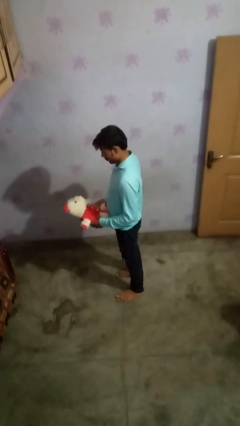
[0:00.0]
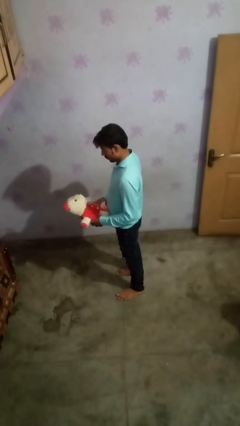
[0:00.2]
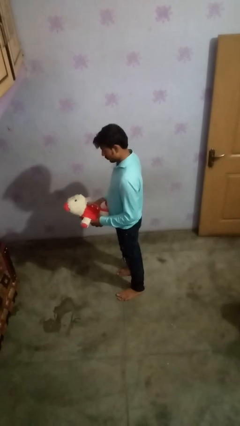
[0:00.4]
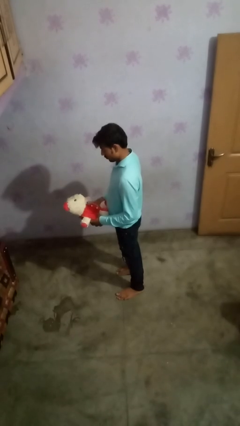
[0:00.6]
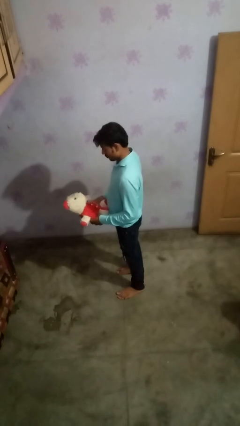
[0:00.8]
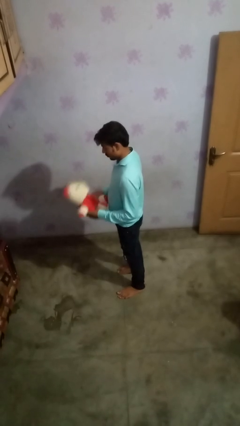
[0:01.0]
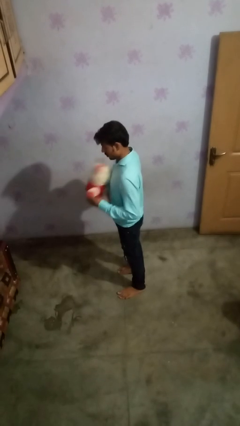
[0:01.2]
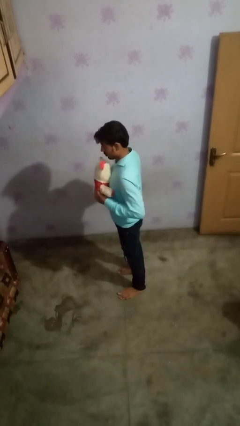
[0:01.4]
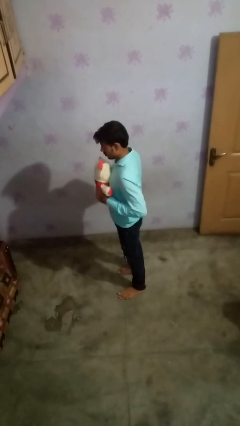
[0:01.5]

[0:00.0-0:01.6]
person hugs stuffed animal

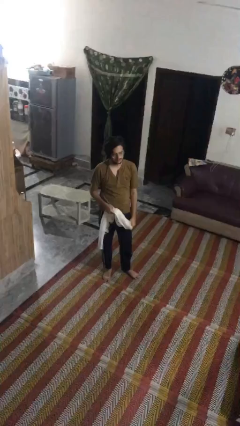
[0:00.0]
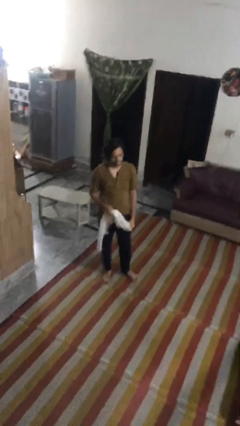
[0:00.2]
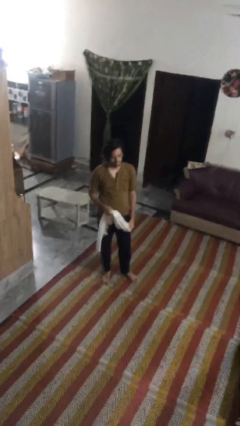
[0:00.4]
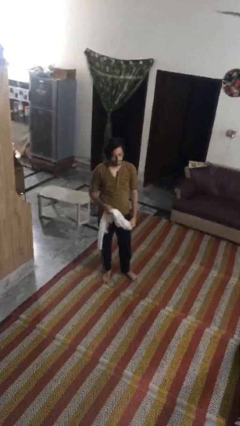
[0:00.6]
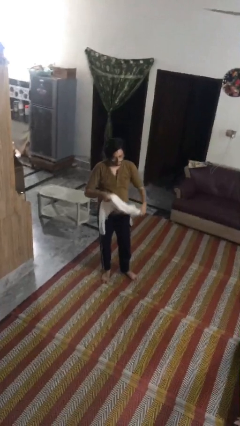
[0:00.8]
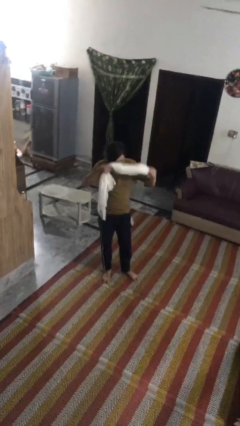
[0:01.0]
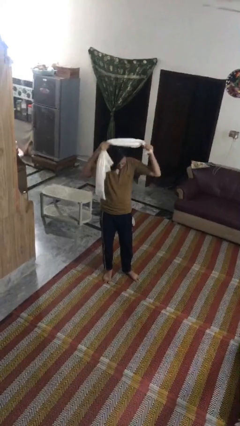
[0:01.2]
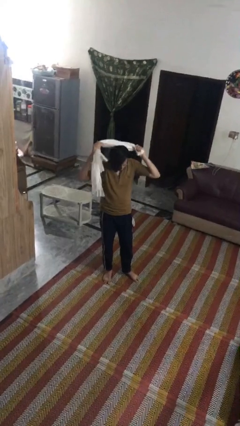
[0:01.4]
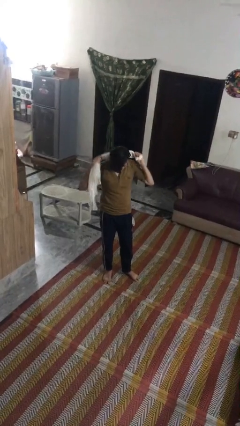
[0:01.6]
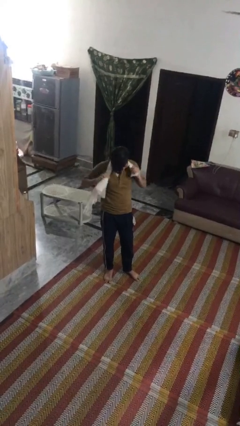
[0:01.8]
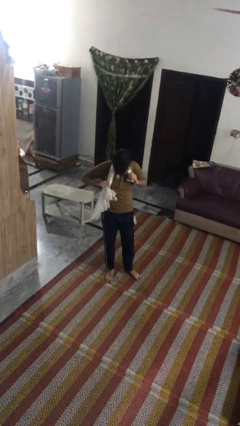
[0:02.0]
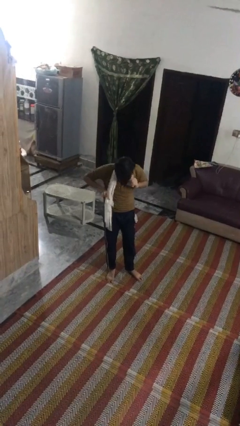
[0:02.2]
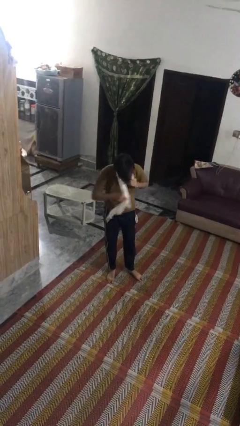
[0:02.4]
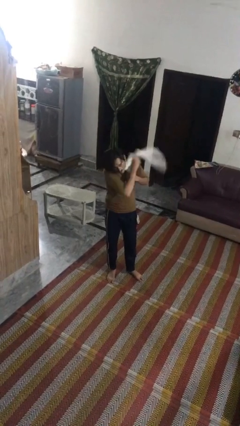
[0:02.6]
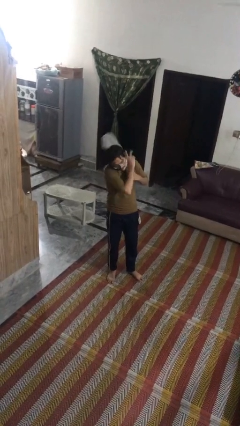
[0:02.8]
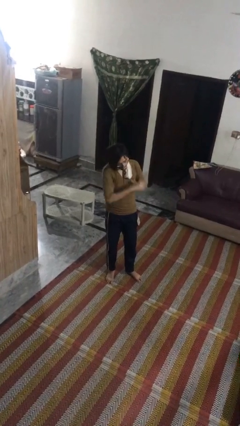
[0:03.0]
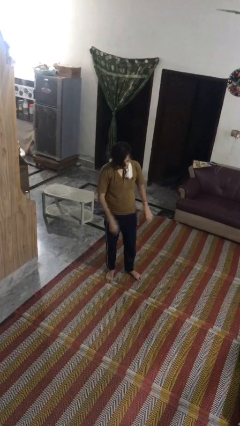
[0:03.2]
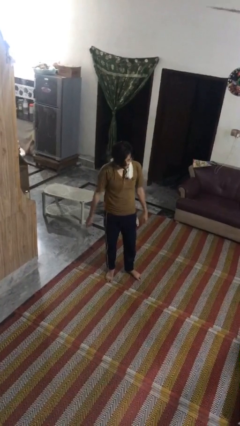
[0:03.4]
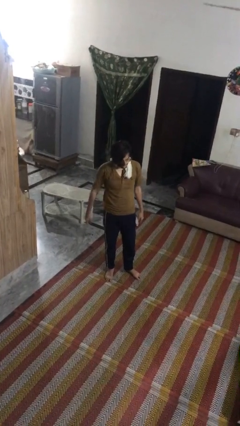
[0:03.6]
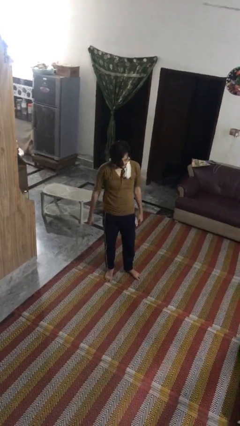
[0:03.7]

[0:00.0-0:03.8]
person puts on scarf

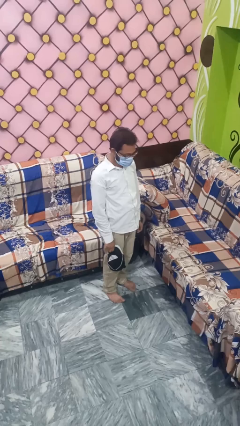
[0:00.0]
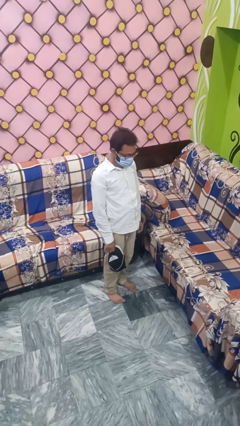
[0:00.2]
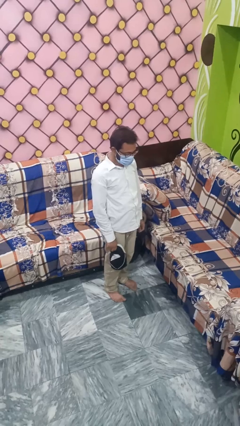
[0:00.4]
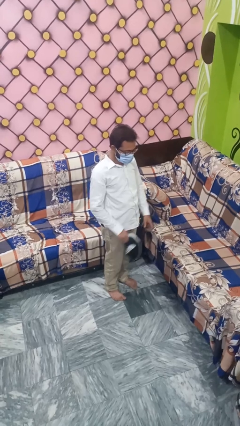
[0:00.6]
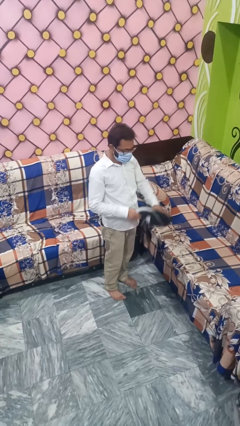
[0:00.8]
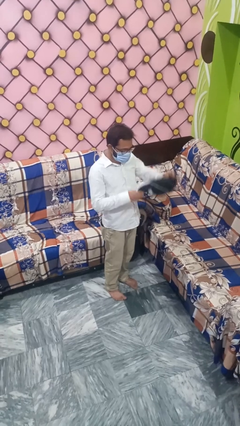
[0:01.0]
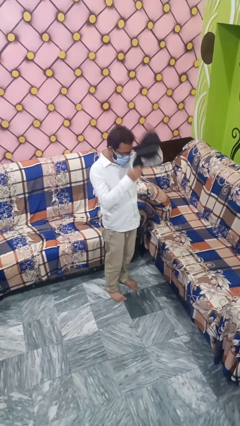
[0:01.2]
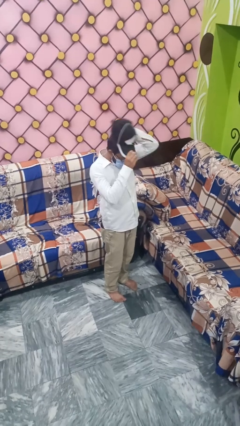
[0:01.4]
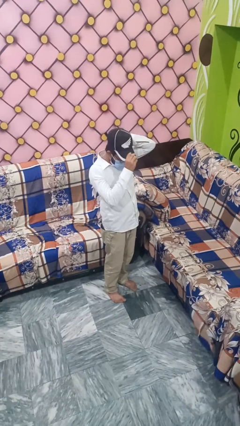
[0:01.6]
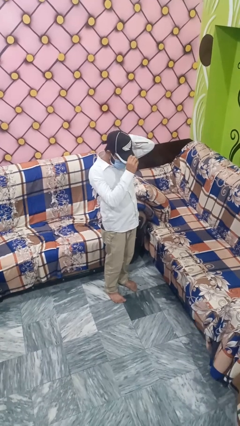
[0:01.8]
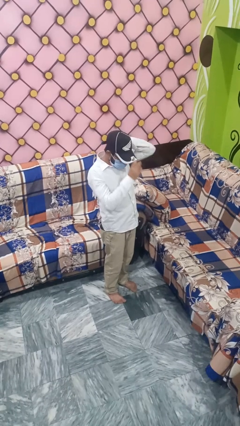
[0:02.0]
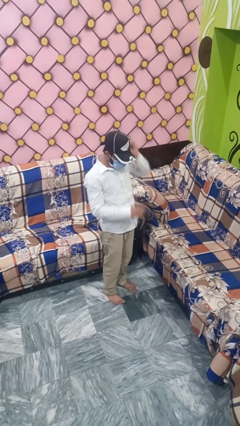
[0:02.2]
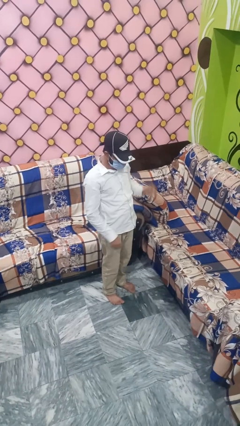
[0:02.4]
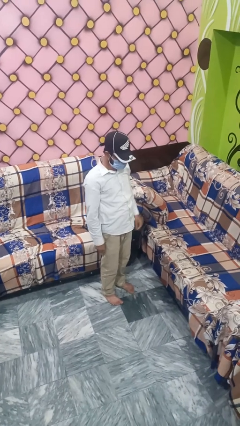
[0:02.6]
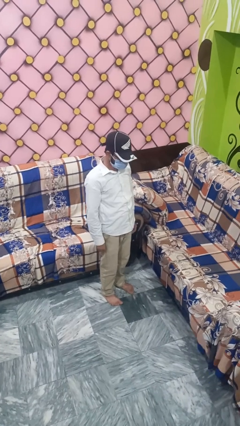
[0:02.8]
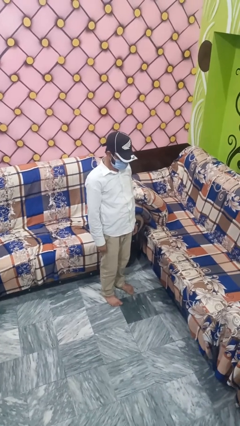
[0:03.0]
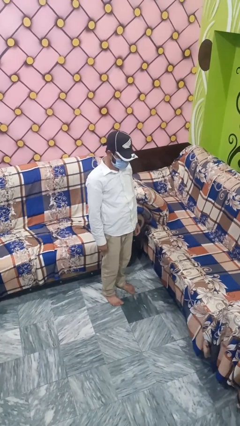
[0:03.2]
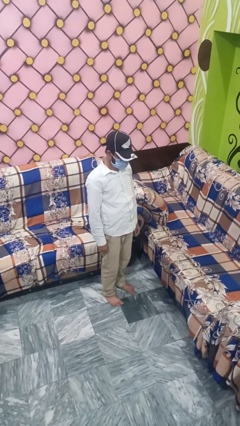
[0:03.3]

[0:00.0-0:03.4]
person puts on hat

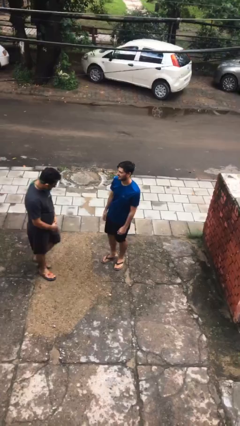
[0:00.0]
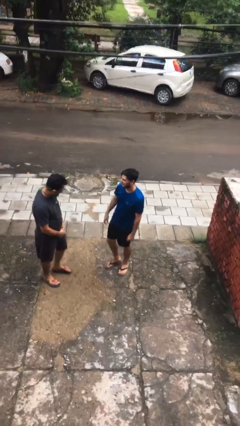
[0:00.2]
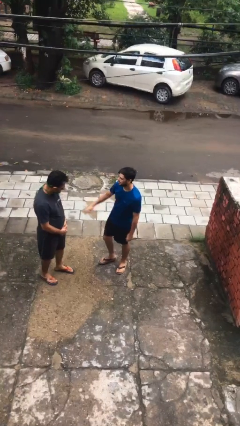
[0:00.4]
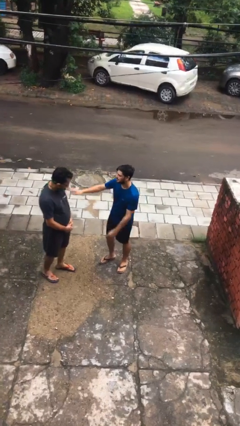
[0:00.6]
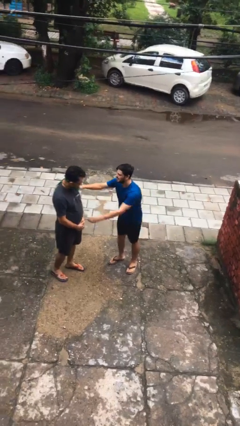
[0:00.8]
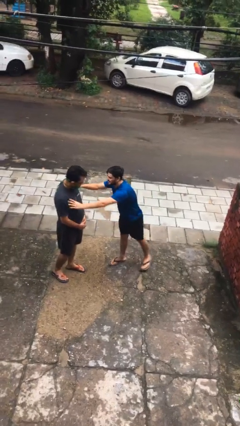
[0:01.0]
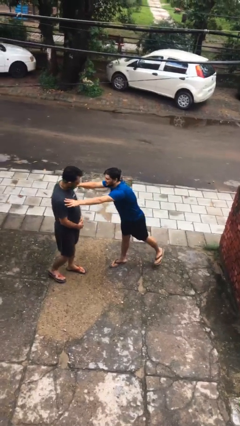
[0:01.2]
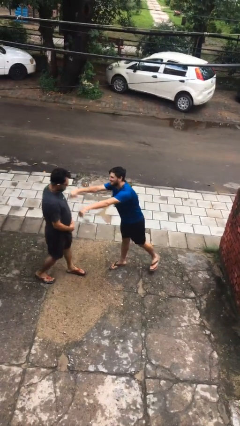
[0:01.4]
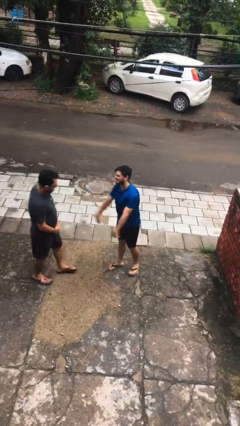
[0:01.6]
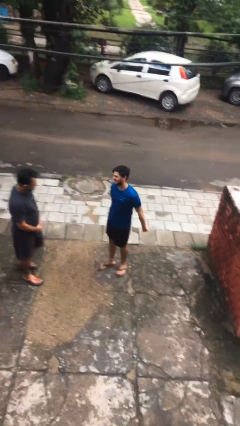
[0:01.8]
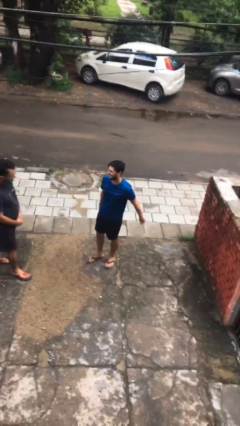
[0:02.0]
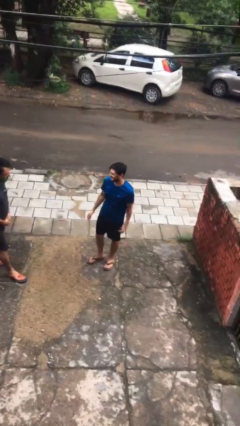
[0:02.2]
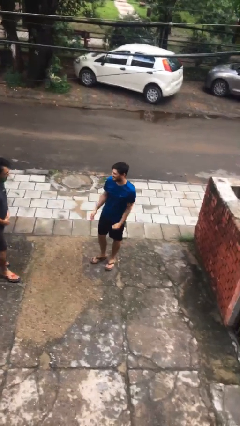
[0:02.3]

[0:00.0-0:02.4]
person shoves person

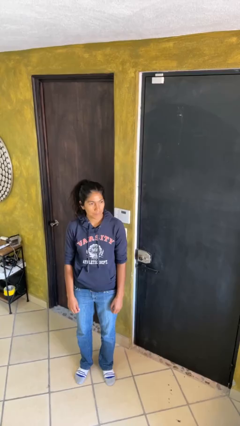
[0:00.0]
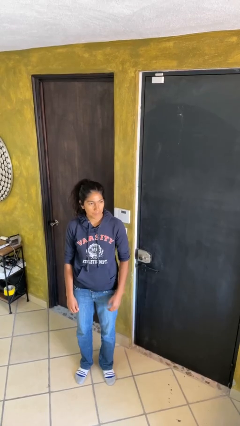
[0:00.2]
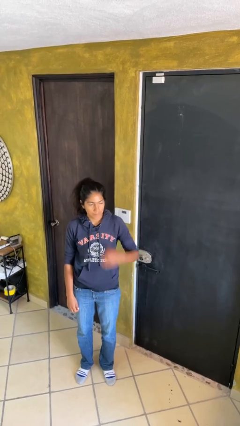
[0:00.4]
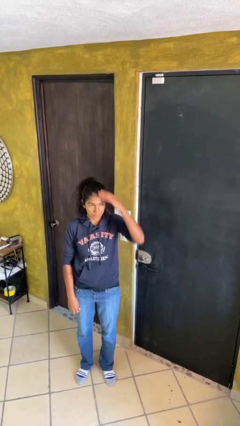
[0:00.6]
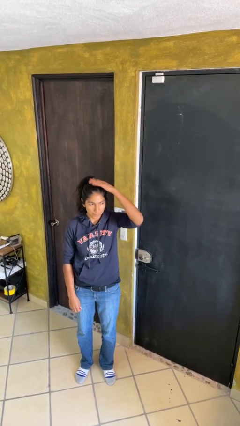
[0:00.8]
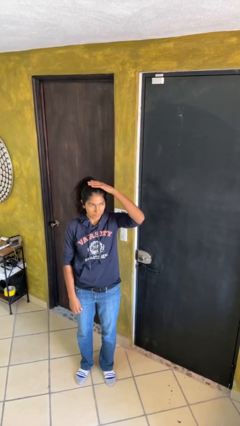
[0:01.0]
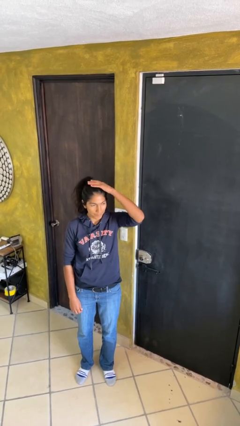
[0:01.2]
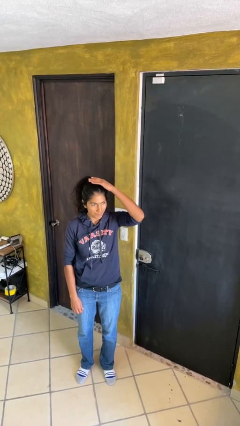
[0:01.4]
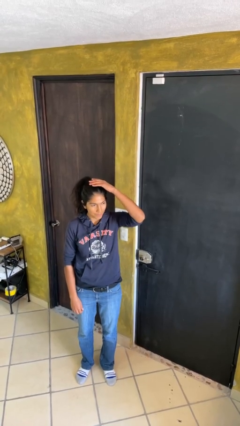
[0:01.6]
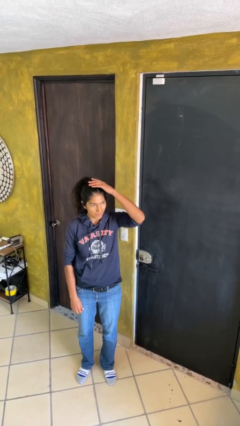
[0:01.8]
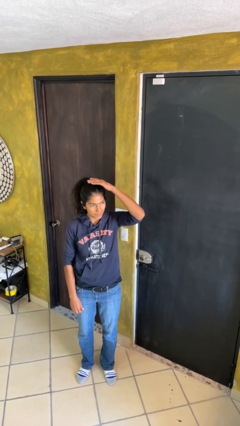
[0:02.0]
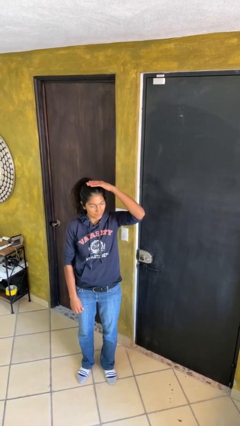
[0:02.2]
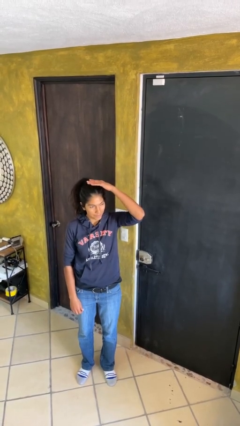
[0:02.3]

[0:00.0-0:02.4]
person pats head

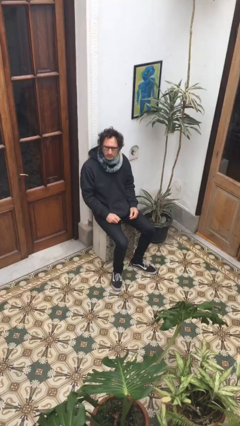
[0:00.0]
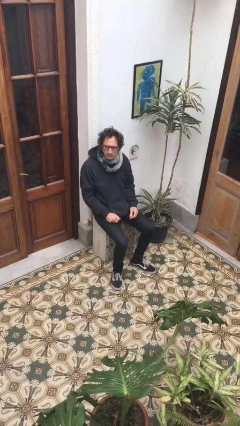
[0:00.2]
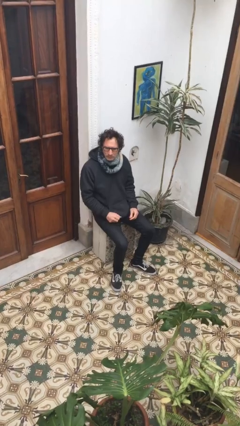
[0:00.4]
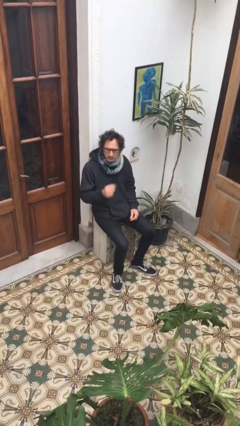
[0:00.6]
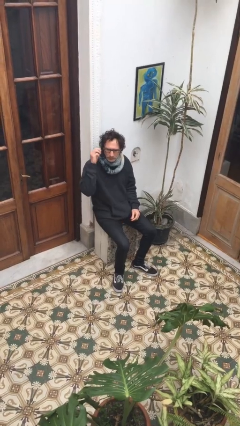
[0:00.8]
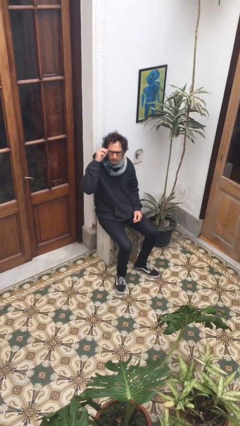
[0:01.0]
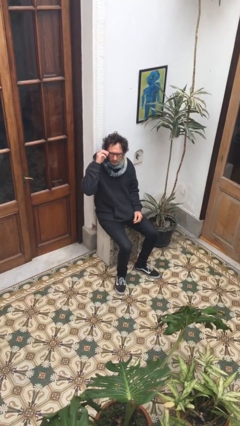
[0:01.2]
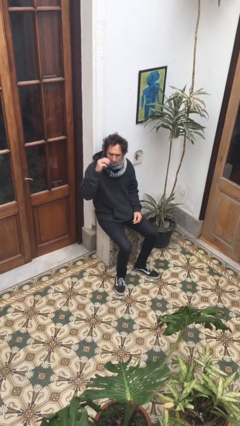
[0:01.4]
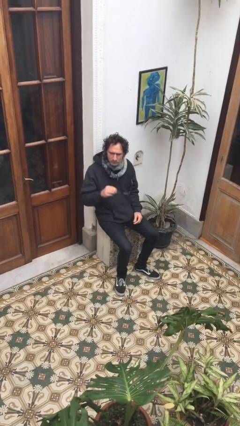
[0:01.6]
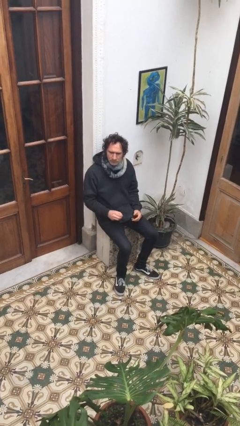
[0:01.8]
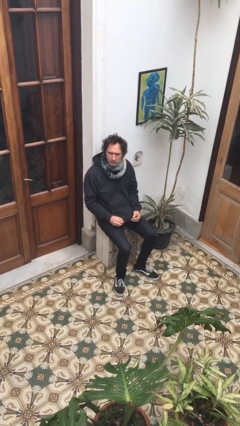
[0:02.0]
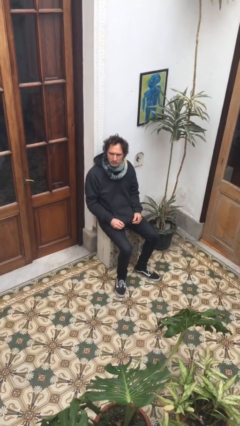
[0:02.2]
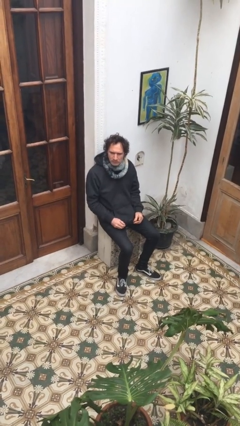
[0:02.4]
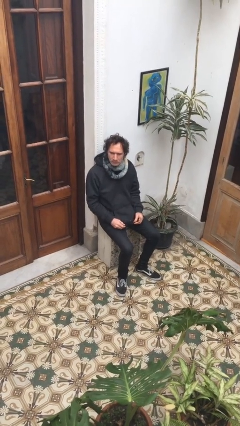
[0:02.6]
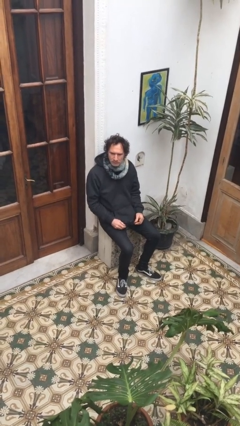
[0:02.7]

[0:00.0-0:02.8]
person takes off glasses

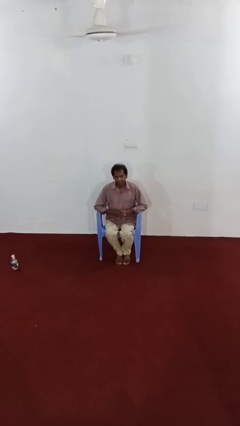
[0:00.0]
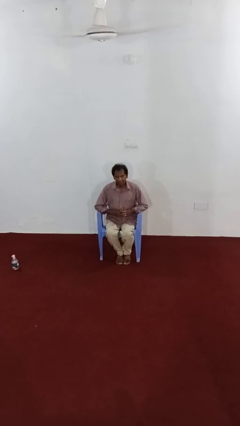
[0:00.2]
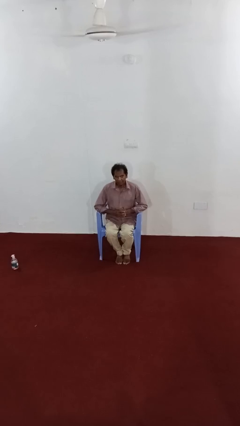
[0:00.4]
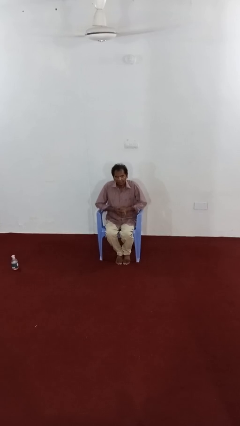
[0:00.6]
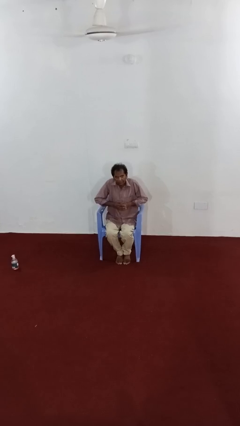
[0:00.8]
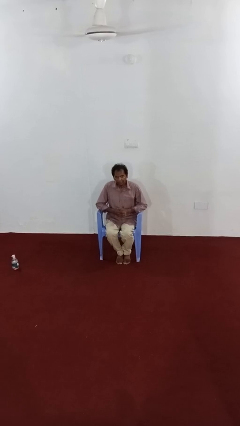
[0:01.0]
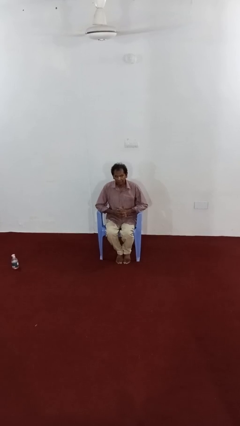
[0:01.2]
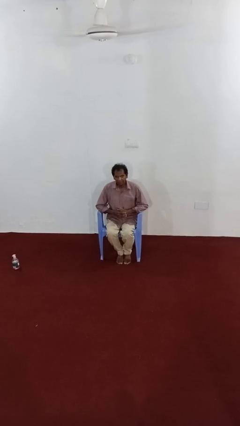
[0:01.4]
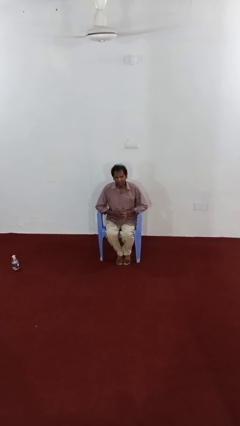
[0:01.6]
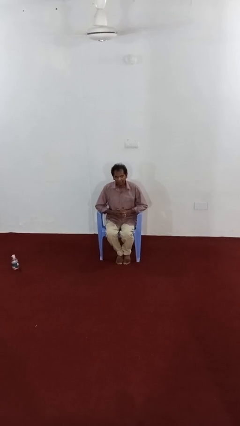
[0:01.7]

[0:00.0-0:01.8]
person shrugs
